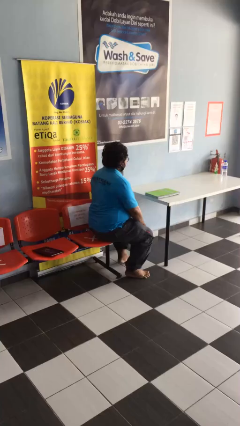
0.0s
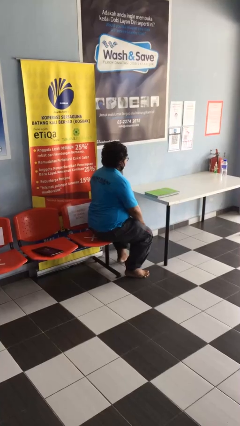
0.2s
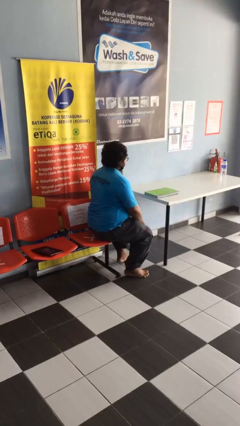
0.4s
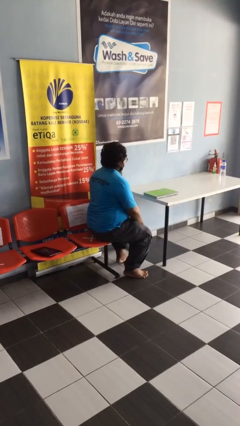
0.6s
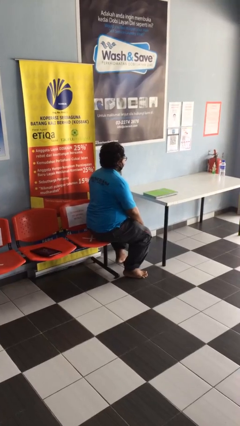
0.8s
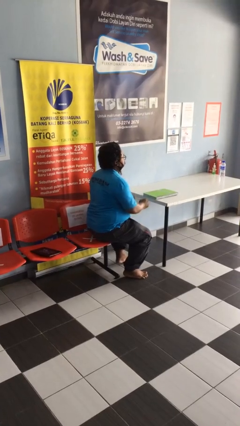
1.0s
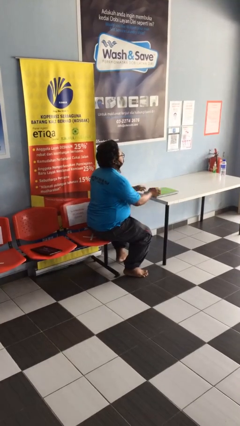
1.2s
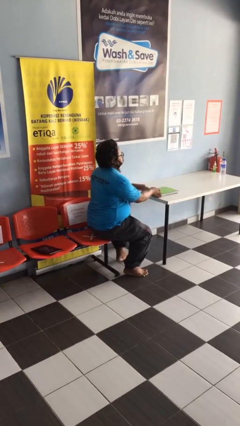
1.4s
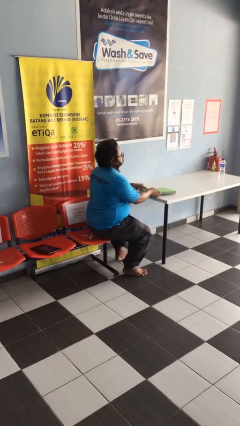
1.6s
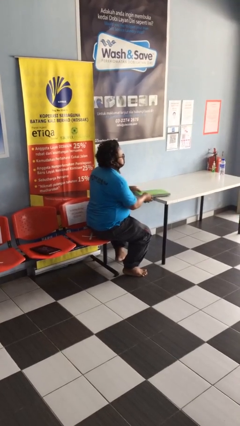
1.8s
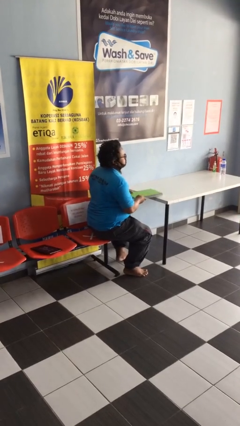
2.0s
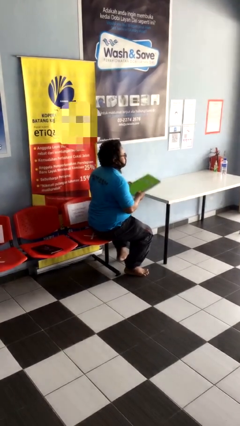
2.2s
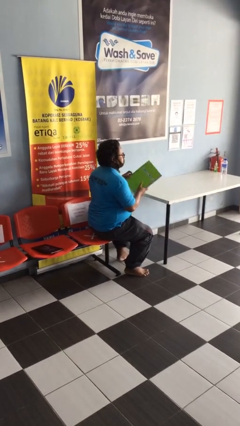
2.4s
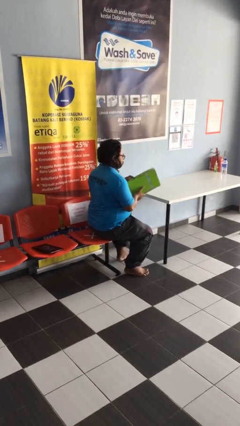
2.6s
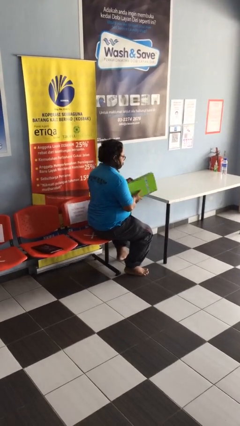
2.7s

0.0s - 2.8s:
person picks up object from table

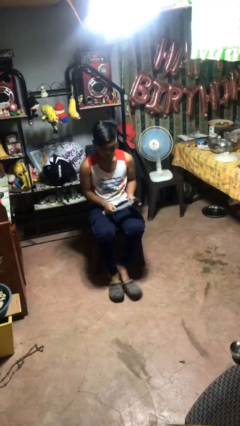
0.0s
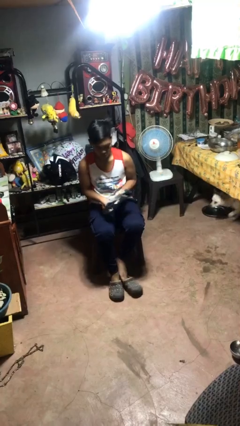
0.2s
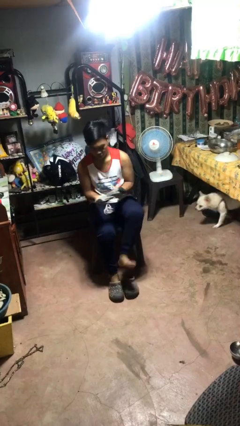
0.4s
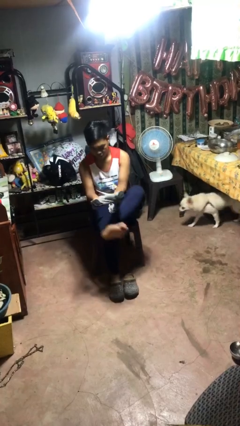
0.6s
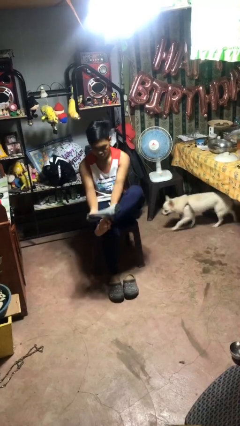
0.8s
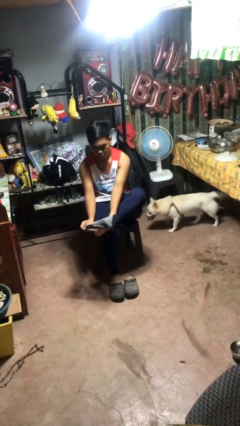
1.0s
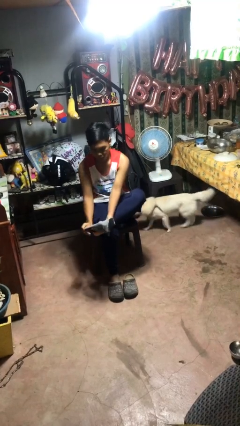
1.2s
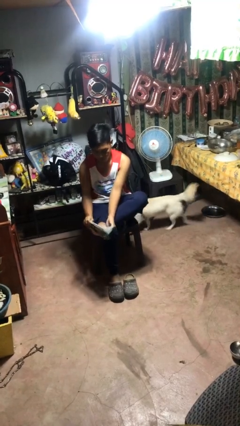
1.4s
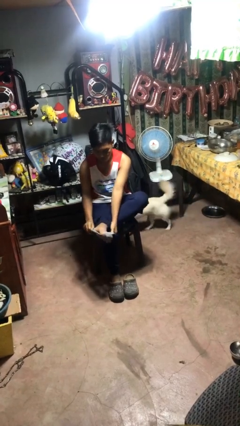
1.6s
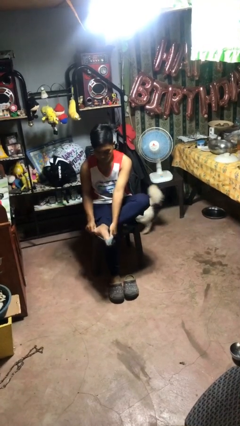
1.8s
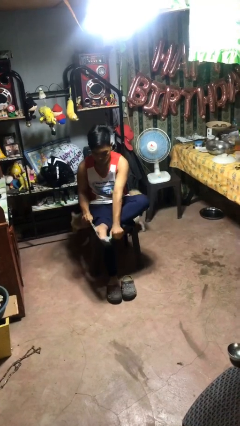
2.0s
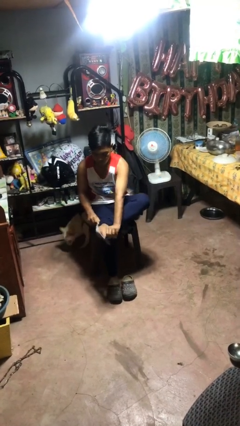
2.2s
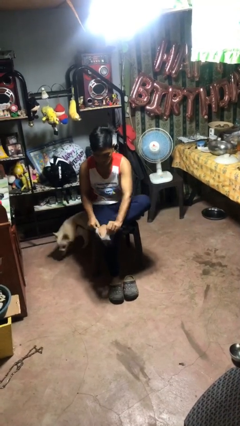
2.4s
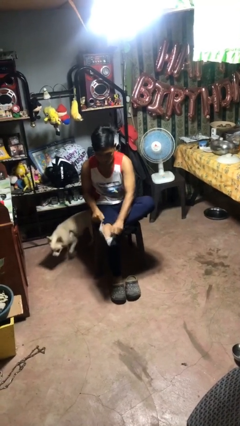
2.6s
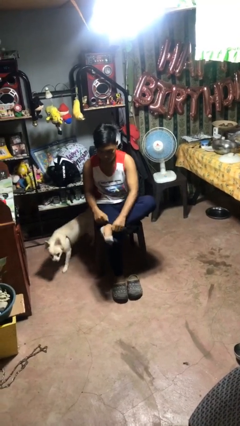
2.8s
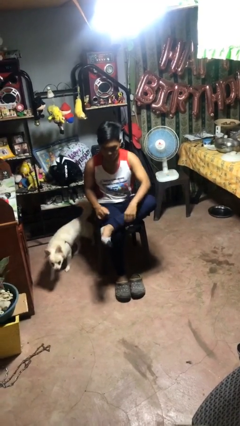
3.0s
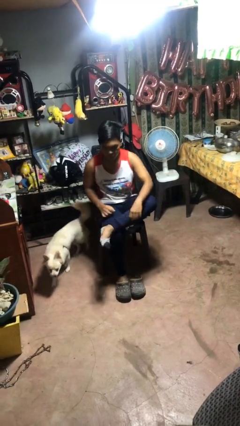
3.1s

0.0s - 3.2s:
person puts on socks

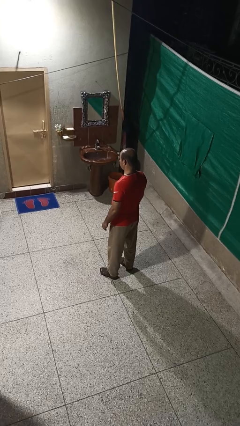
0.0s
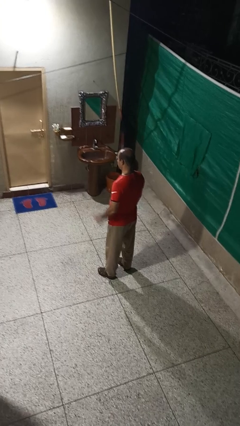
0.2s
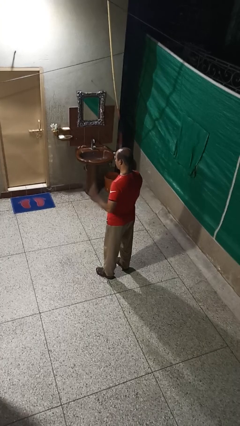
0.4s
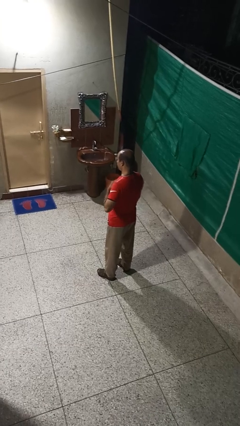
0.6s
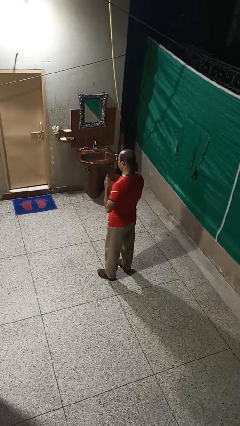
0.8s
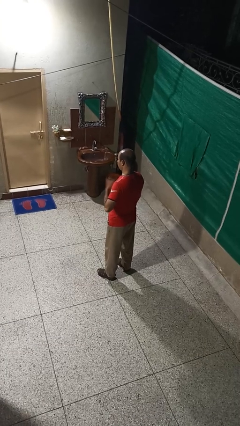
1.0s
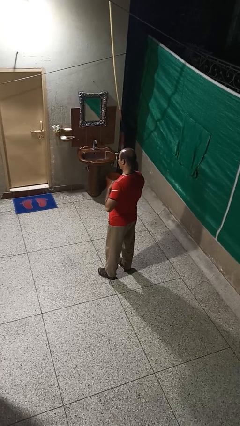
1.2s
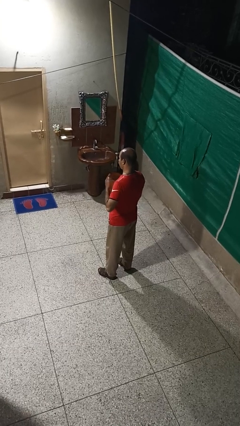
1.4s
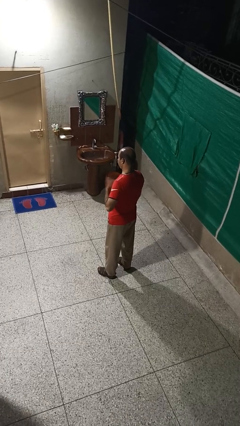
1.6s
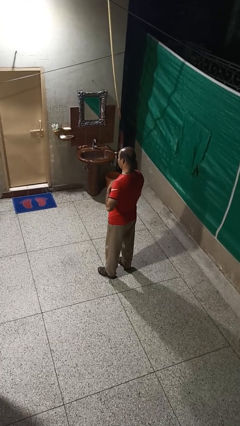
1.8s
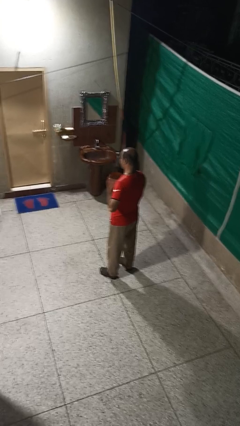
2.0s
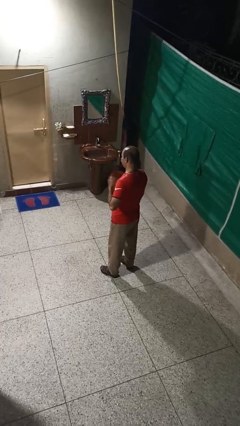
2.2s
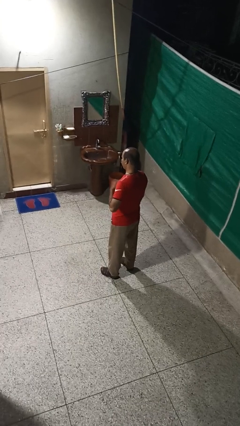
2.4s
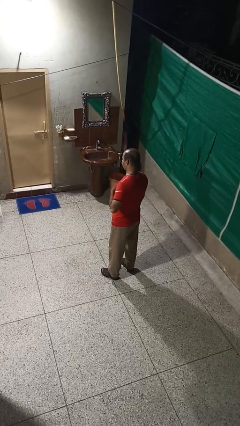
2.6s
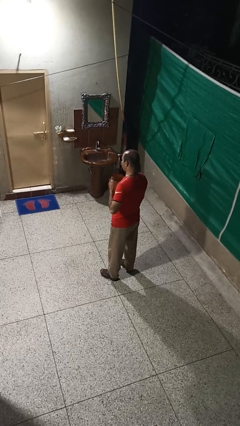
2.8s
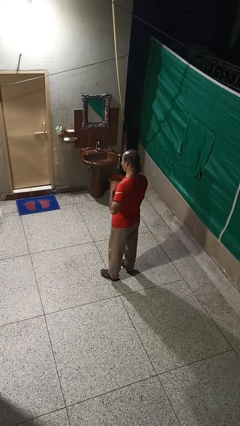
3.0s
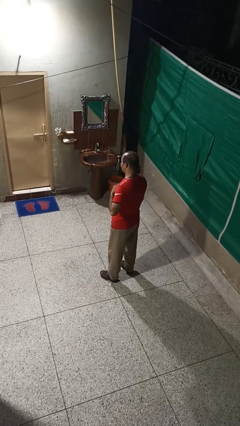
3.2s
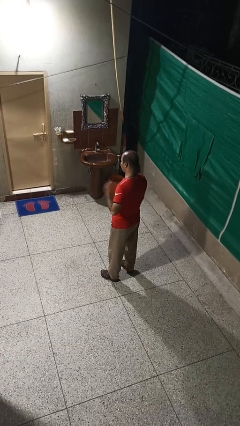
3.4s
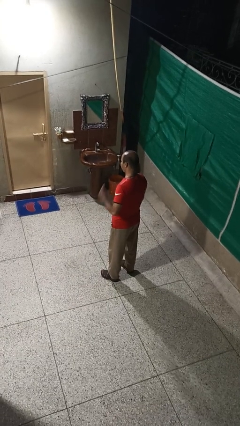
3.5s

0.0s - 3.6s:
person drums on chest

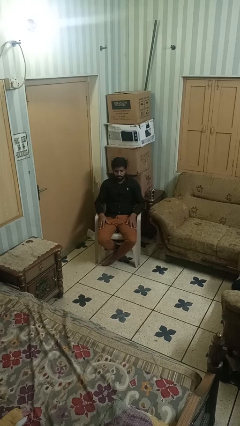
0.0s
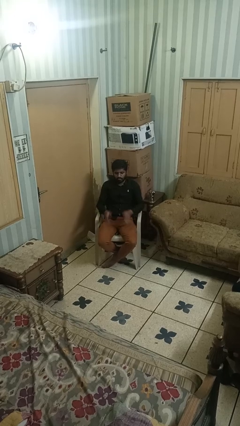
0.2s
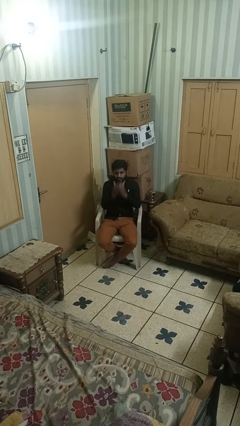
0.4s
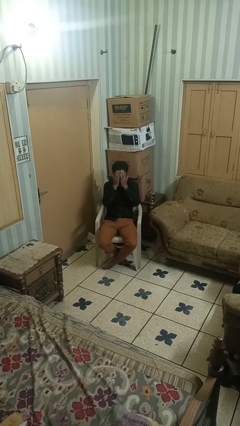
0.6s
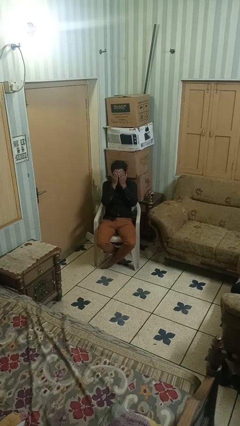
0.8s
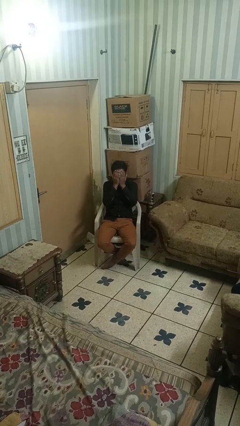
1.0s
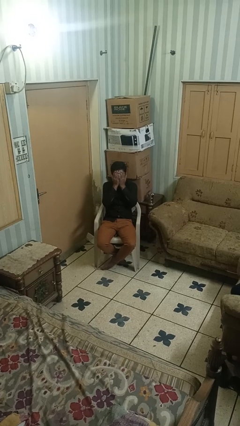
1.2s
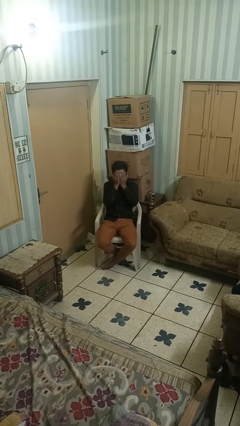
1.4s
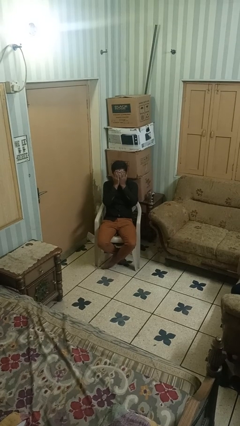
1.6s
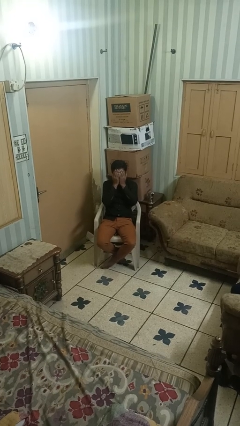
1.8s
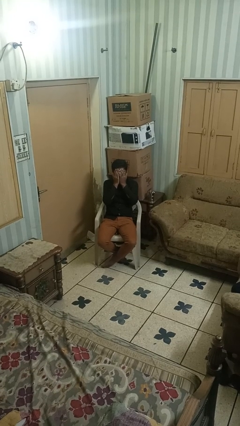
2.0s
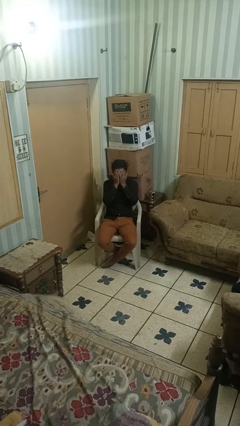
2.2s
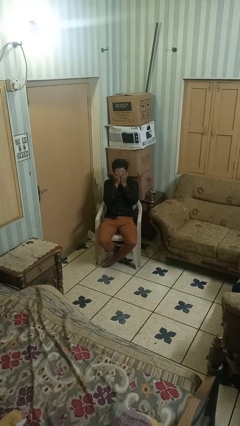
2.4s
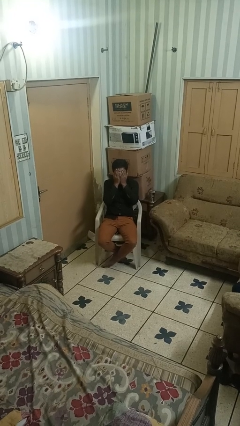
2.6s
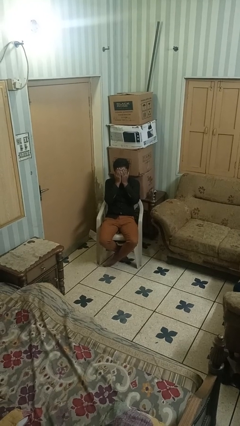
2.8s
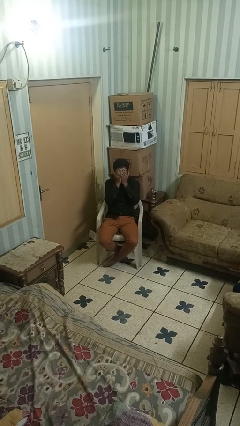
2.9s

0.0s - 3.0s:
person covers face with hands

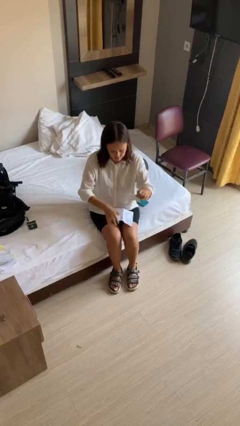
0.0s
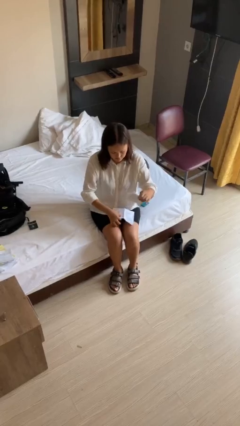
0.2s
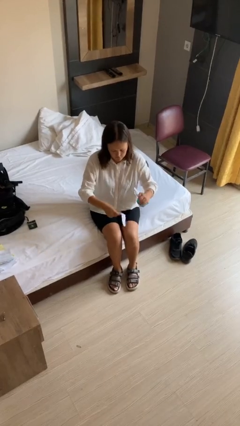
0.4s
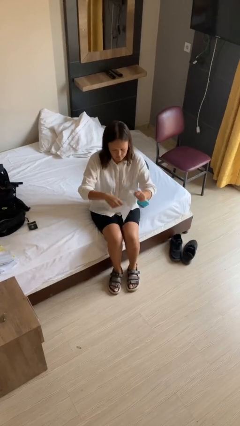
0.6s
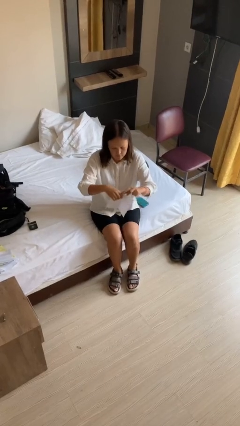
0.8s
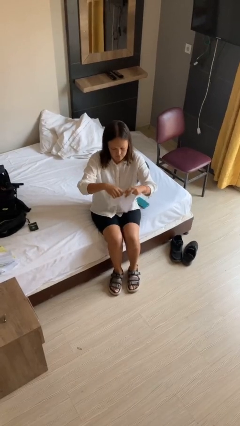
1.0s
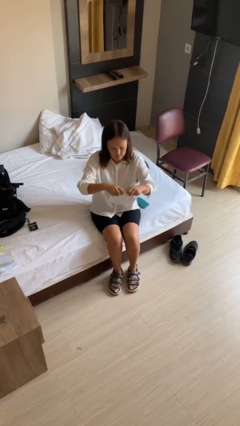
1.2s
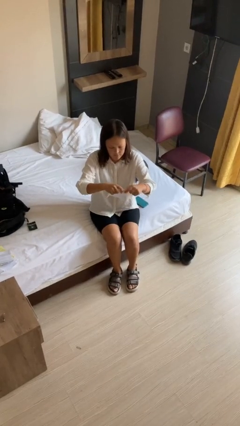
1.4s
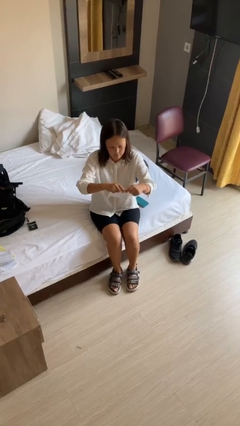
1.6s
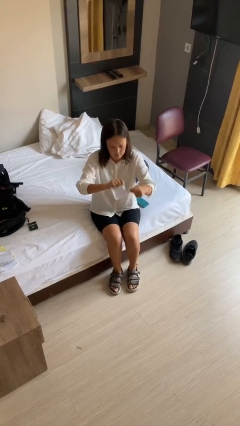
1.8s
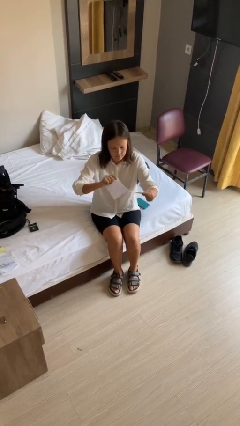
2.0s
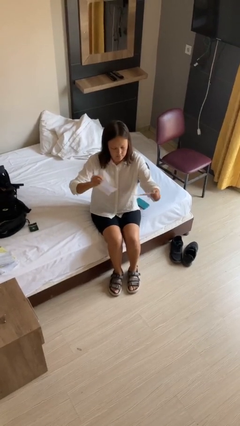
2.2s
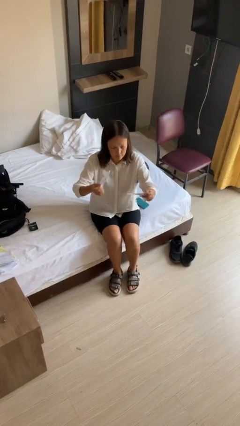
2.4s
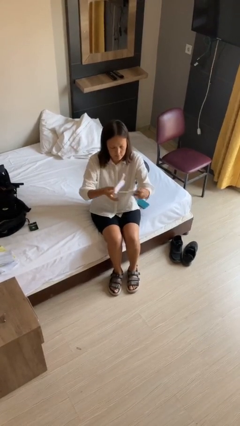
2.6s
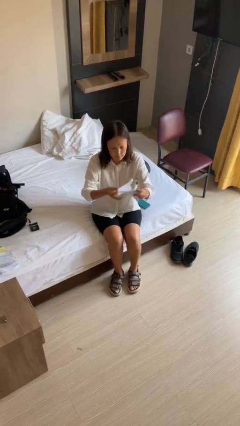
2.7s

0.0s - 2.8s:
person tears paper

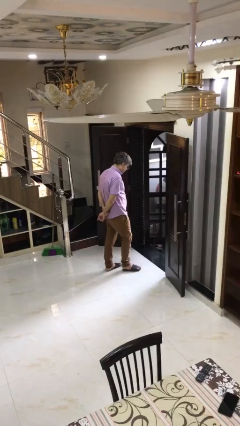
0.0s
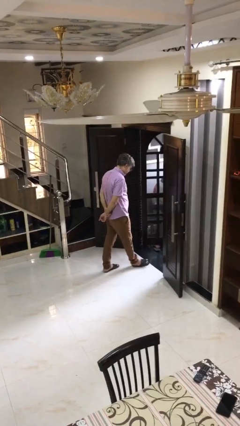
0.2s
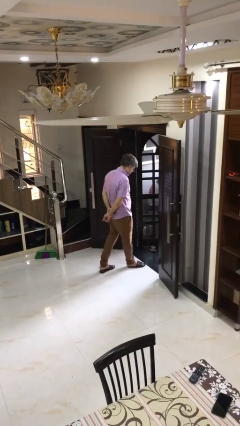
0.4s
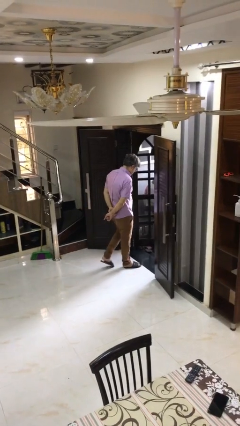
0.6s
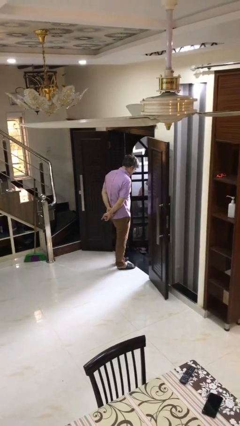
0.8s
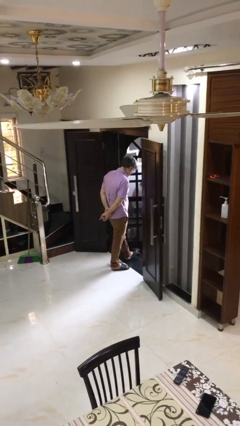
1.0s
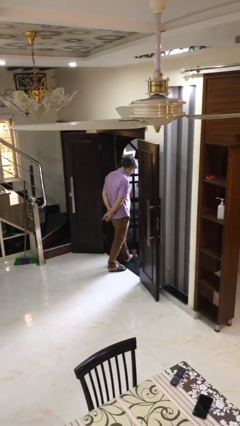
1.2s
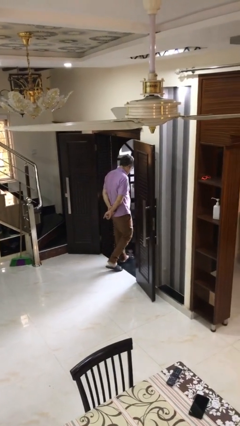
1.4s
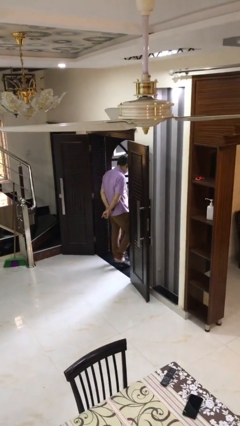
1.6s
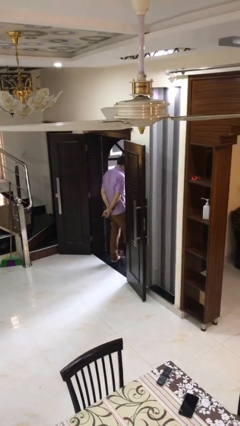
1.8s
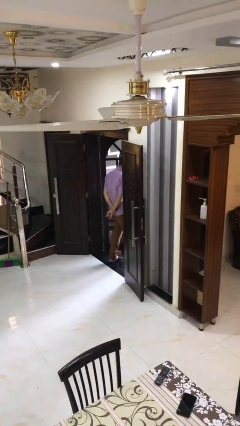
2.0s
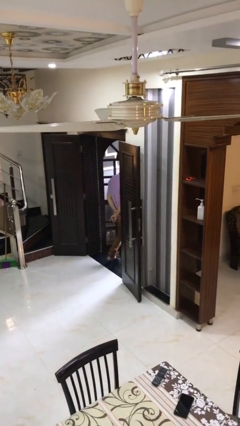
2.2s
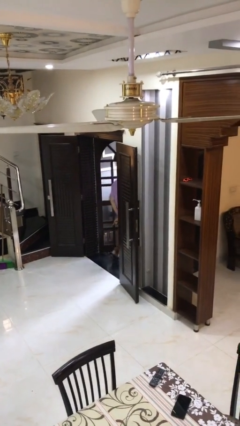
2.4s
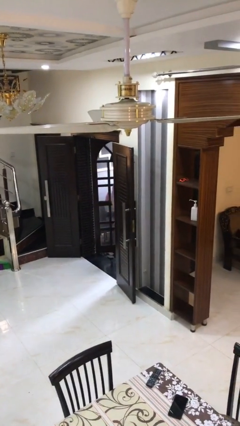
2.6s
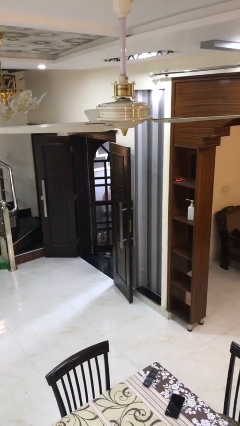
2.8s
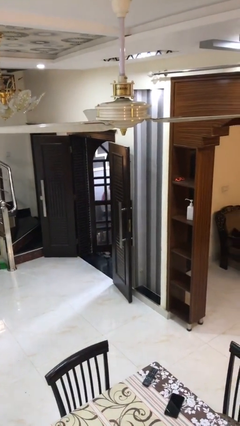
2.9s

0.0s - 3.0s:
person exits scene through structure
